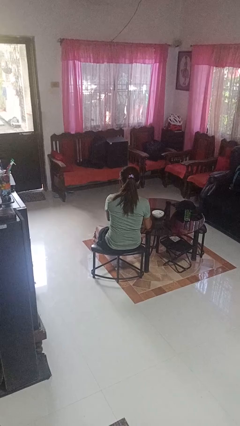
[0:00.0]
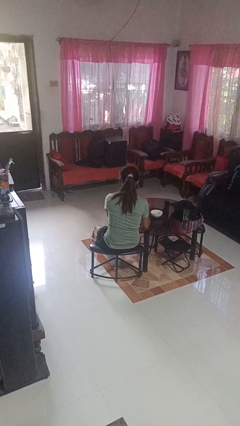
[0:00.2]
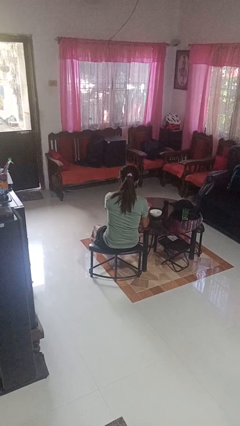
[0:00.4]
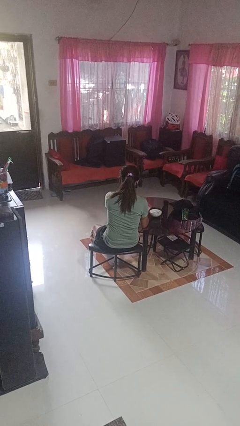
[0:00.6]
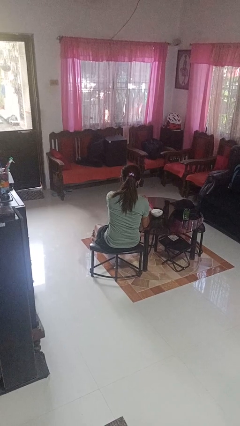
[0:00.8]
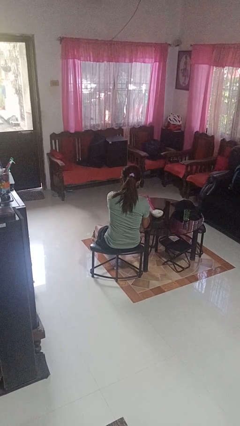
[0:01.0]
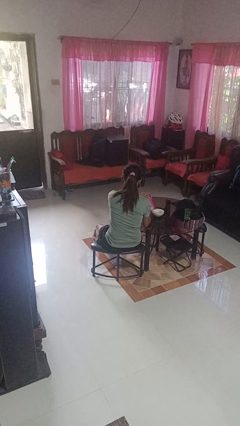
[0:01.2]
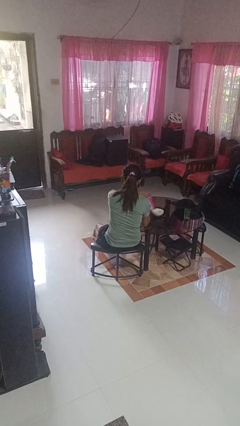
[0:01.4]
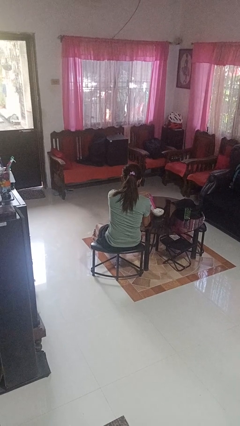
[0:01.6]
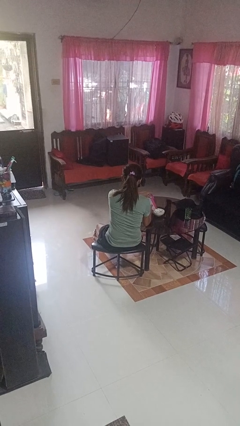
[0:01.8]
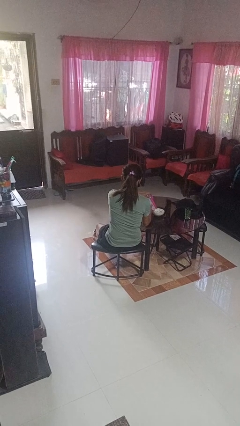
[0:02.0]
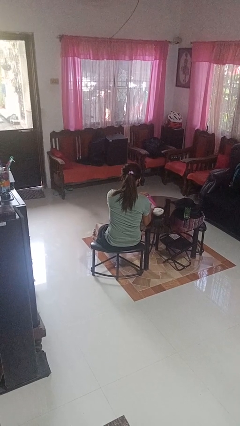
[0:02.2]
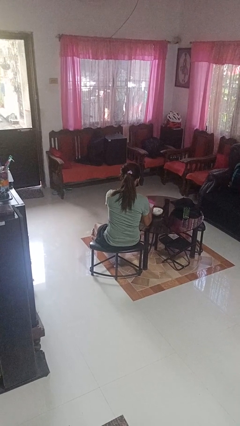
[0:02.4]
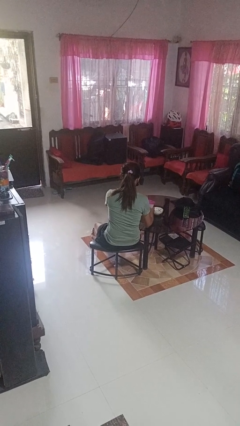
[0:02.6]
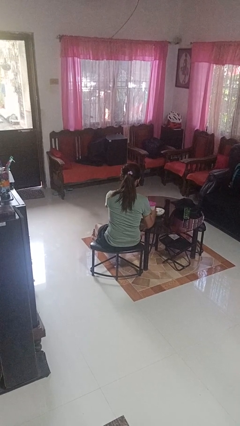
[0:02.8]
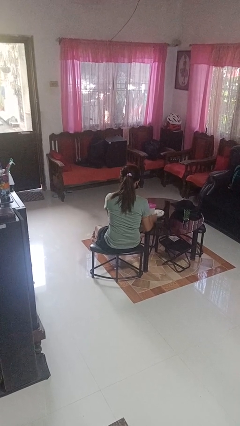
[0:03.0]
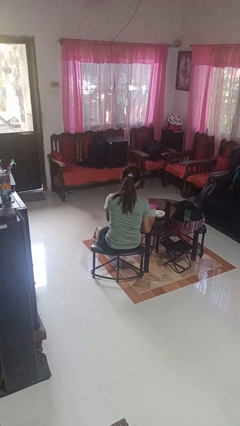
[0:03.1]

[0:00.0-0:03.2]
person pours into bowl

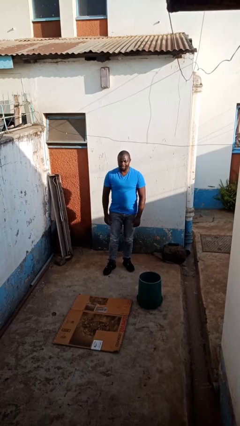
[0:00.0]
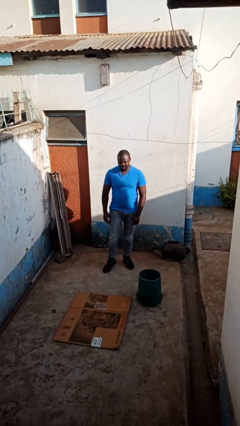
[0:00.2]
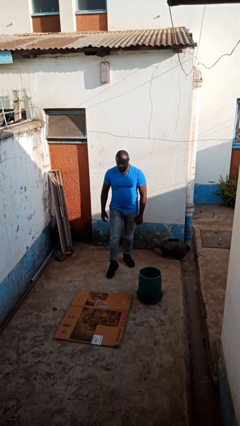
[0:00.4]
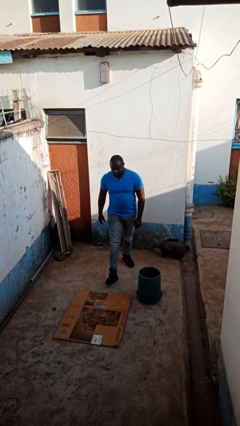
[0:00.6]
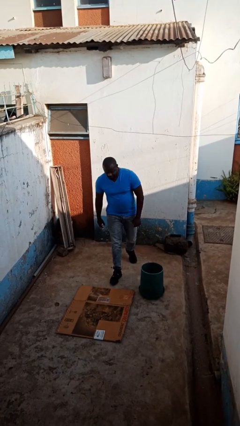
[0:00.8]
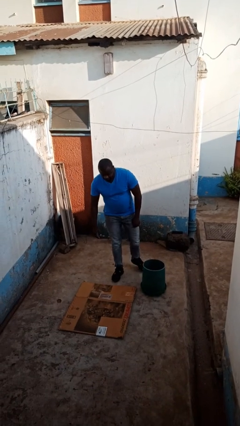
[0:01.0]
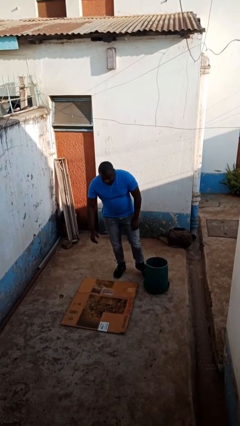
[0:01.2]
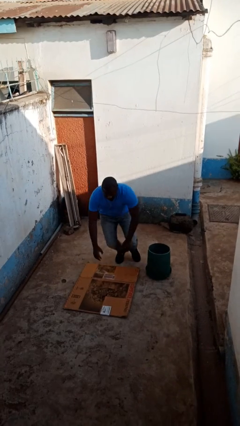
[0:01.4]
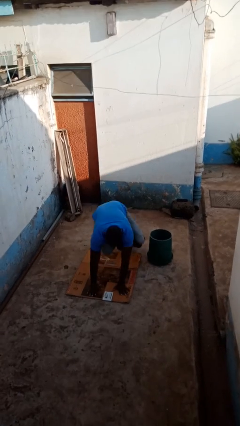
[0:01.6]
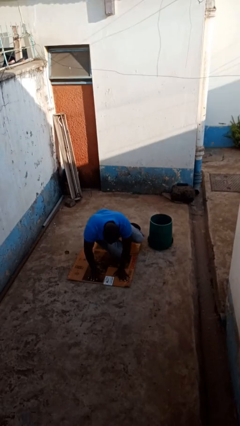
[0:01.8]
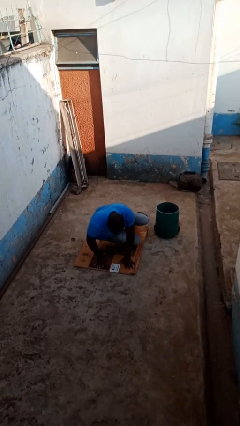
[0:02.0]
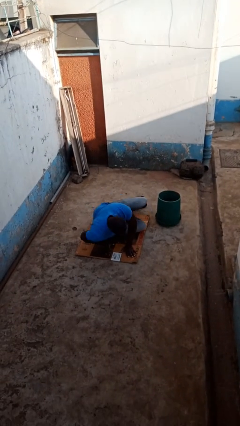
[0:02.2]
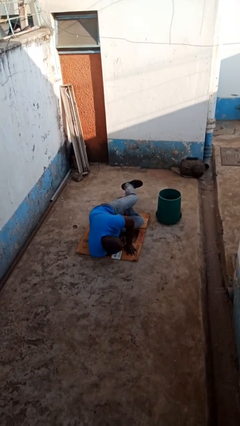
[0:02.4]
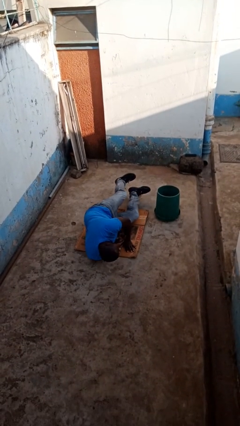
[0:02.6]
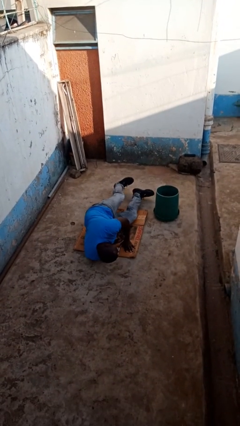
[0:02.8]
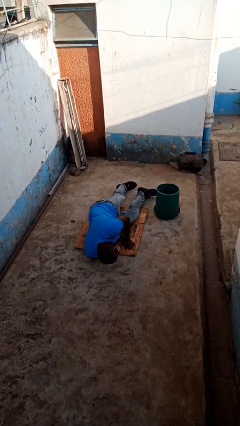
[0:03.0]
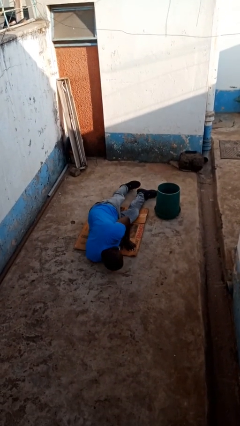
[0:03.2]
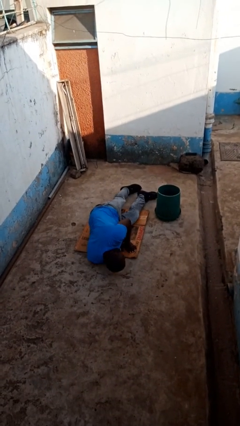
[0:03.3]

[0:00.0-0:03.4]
person trips on object on floor

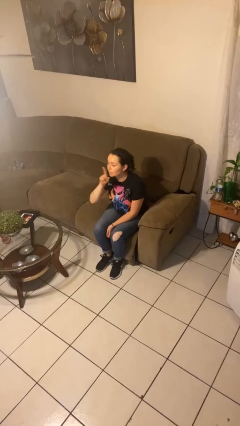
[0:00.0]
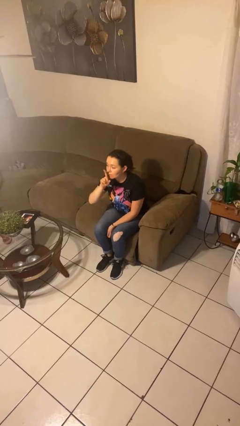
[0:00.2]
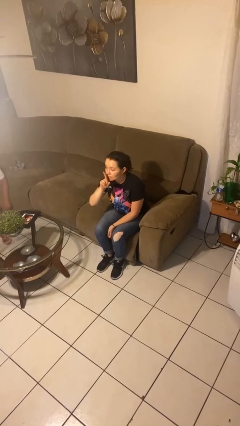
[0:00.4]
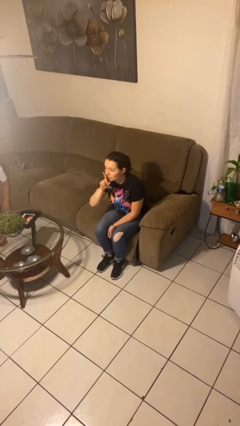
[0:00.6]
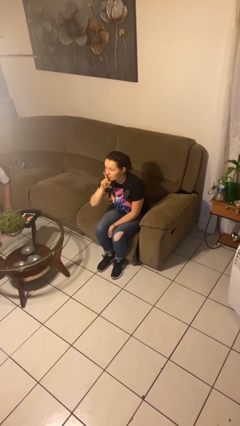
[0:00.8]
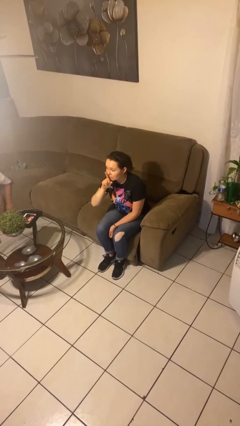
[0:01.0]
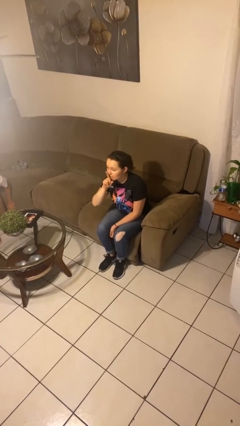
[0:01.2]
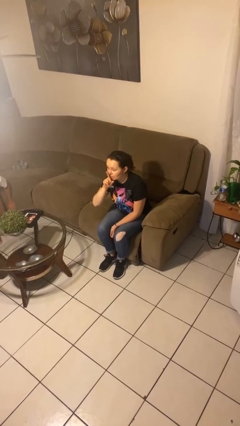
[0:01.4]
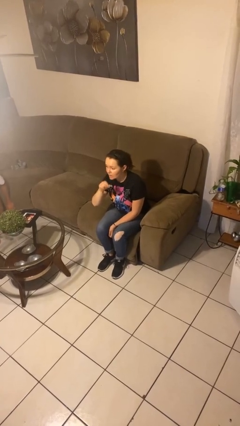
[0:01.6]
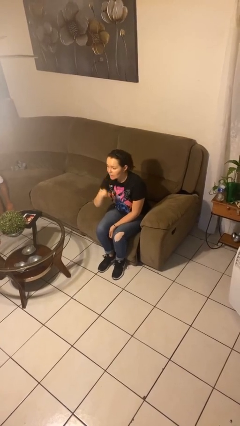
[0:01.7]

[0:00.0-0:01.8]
person gestures be quiet

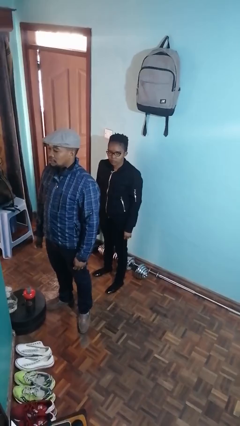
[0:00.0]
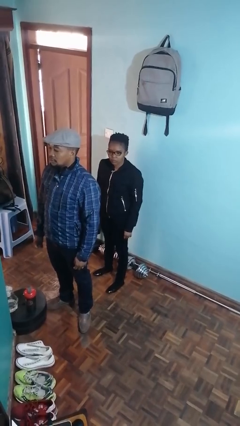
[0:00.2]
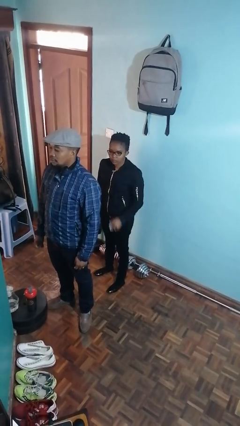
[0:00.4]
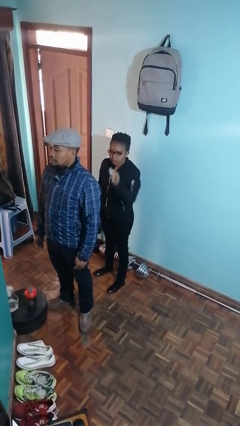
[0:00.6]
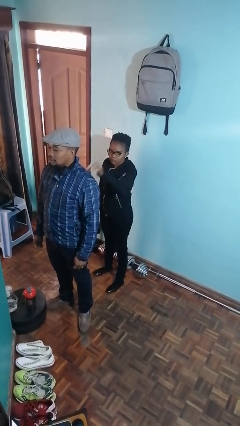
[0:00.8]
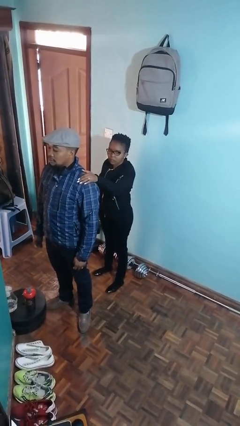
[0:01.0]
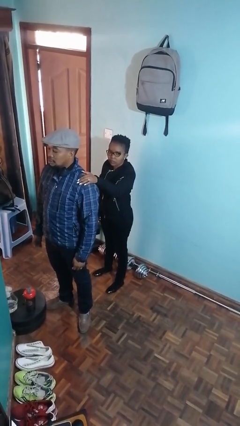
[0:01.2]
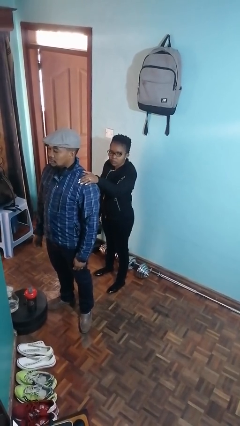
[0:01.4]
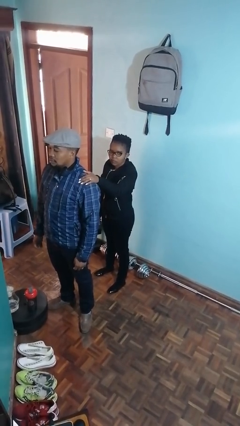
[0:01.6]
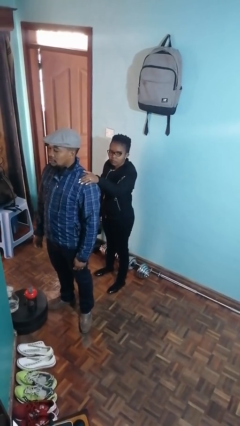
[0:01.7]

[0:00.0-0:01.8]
person grabs person by shoulder

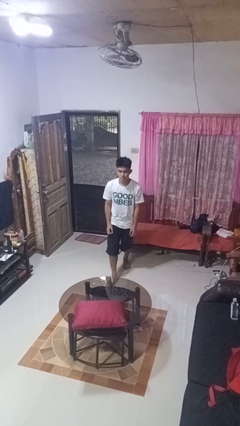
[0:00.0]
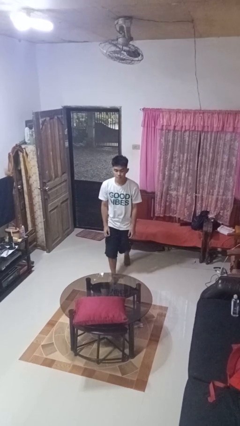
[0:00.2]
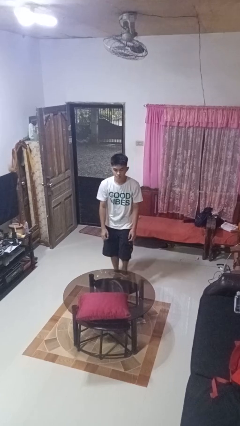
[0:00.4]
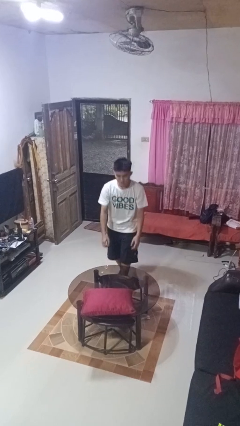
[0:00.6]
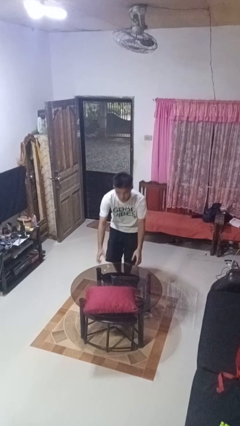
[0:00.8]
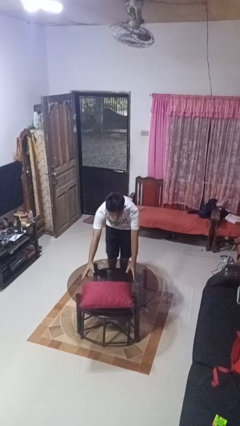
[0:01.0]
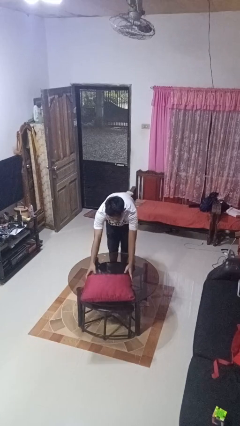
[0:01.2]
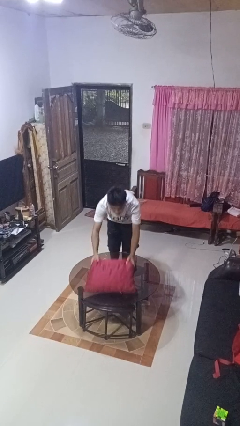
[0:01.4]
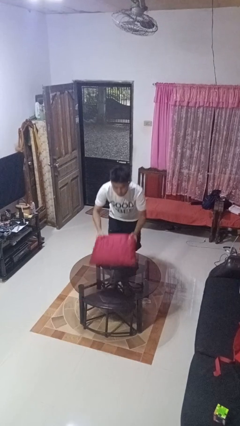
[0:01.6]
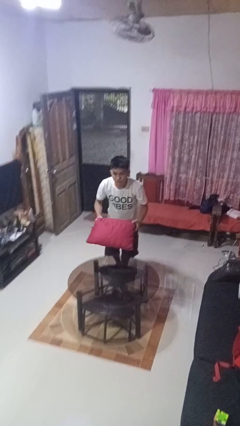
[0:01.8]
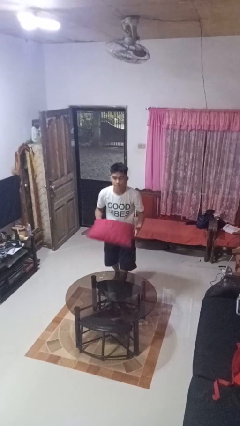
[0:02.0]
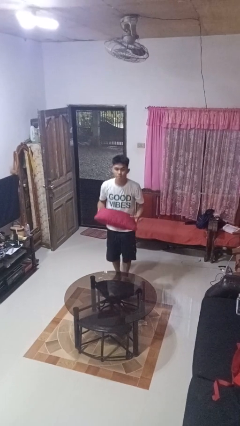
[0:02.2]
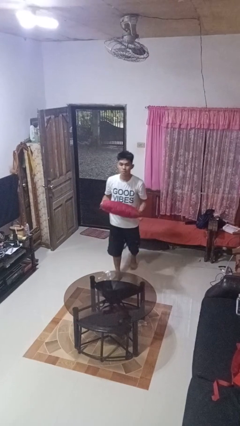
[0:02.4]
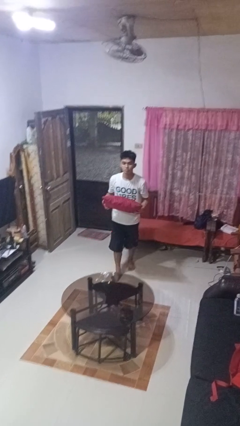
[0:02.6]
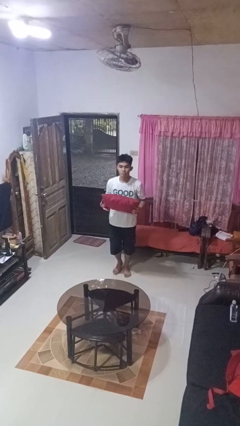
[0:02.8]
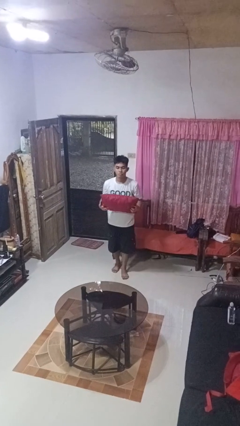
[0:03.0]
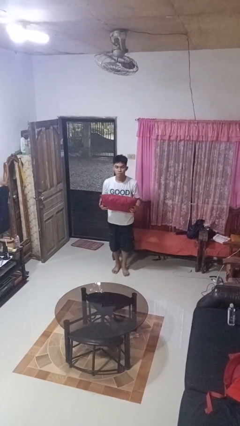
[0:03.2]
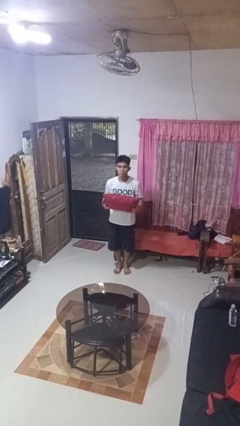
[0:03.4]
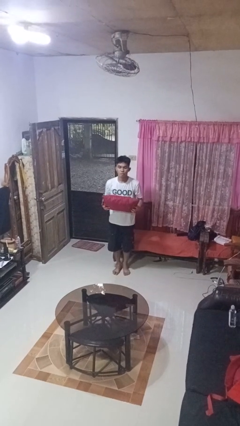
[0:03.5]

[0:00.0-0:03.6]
person picks up object from table

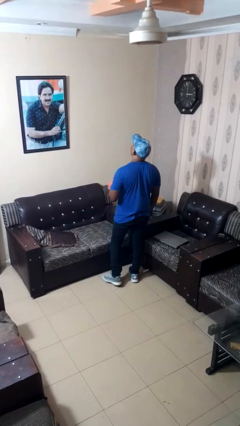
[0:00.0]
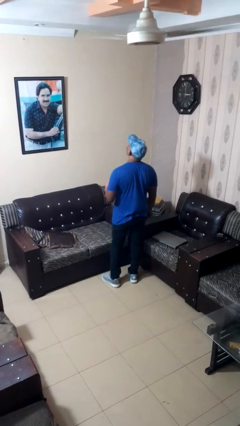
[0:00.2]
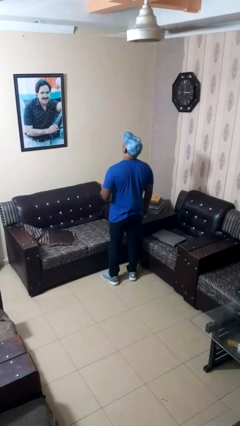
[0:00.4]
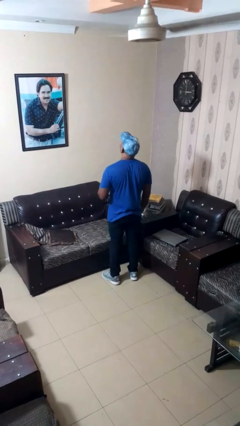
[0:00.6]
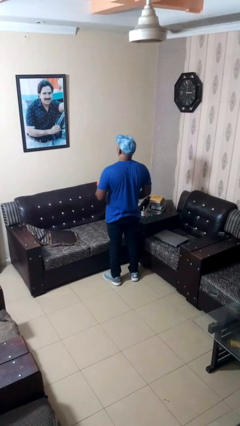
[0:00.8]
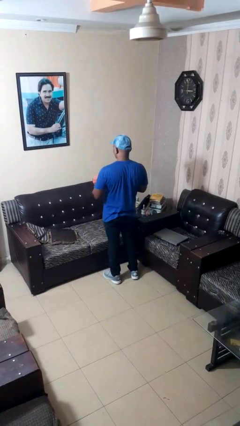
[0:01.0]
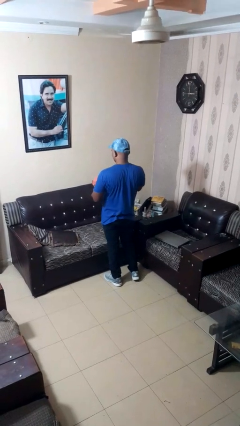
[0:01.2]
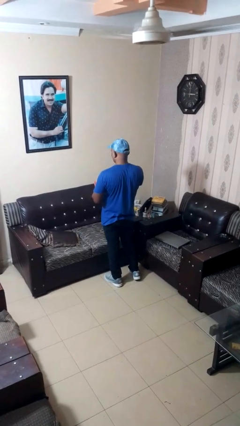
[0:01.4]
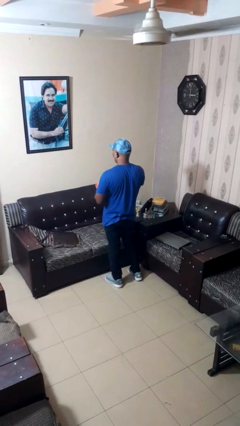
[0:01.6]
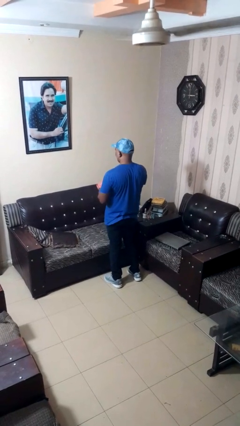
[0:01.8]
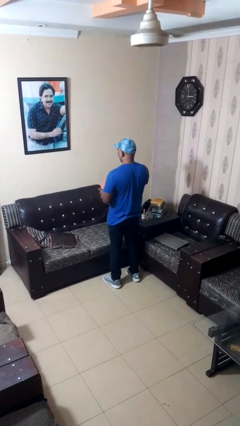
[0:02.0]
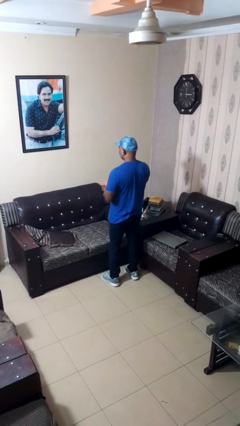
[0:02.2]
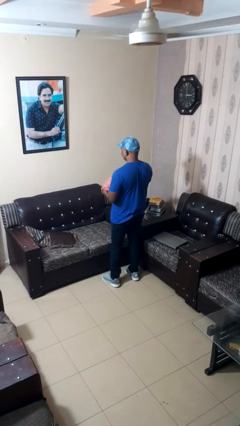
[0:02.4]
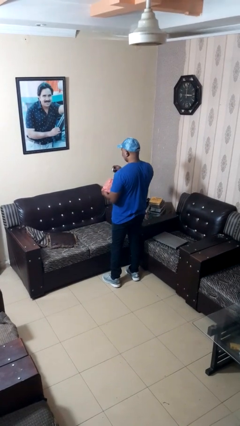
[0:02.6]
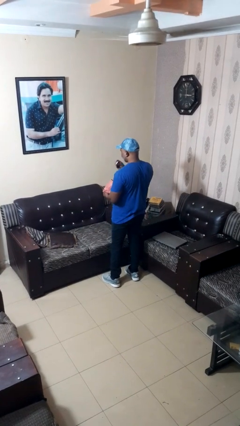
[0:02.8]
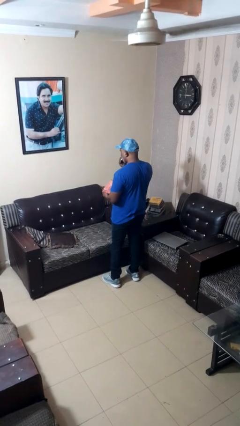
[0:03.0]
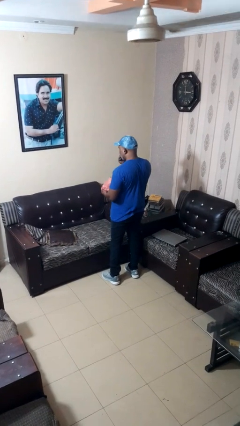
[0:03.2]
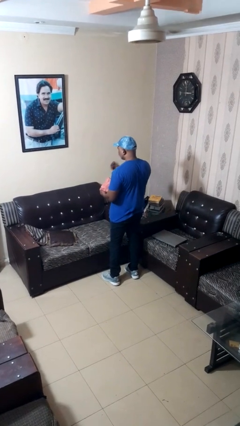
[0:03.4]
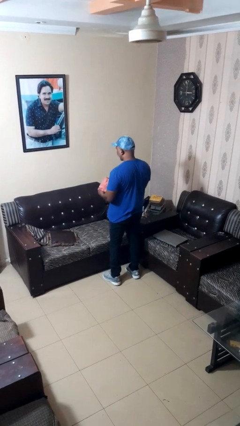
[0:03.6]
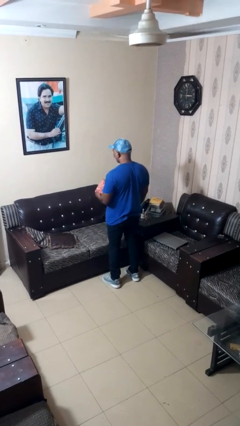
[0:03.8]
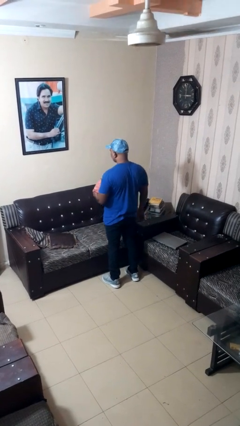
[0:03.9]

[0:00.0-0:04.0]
person eats snack from bag
